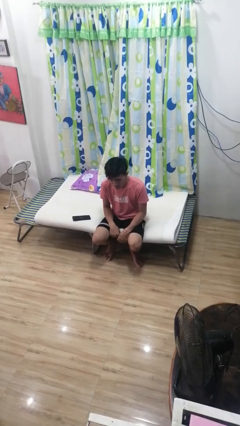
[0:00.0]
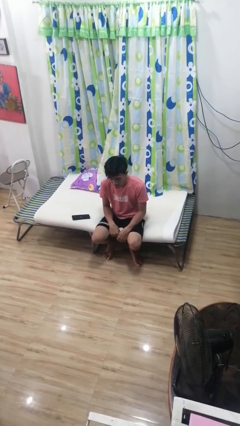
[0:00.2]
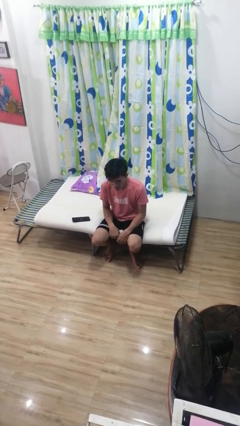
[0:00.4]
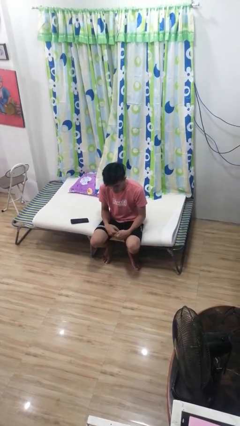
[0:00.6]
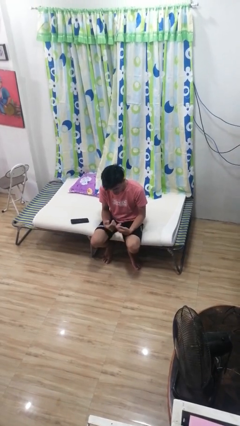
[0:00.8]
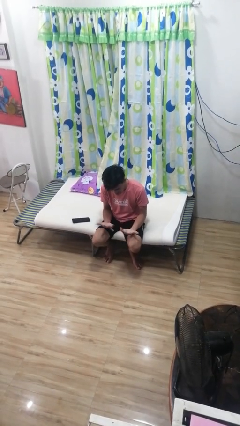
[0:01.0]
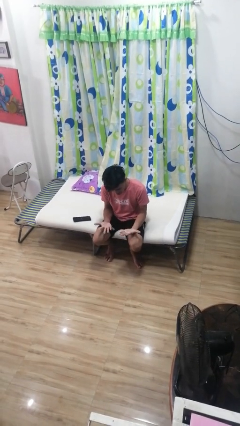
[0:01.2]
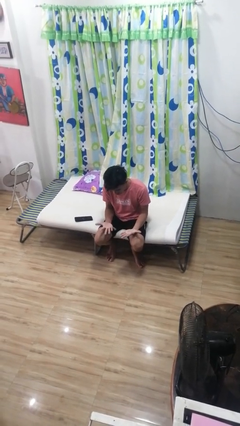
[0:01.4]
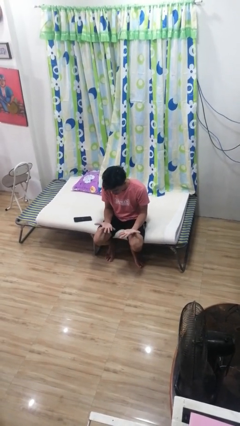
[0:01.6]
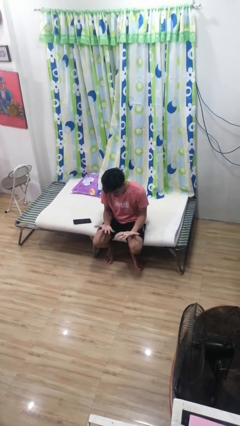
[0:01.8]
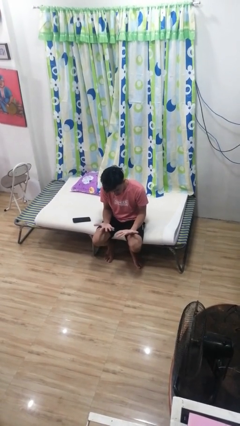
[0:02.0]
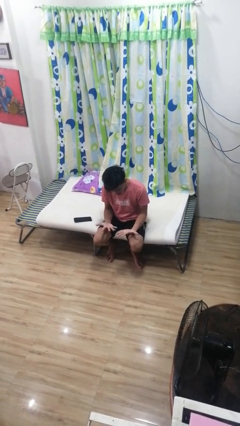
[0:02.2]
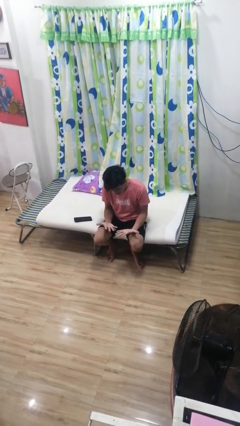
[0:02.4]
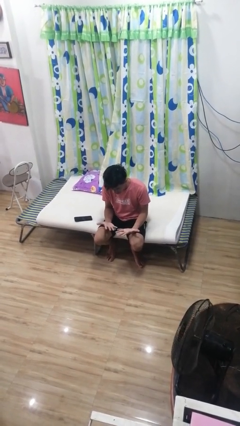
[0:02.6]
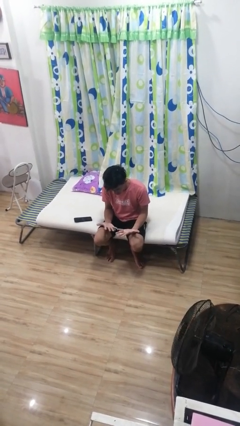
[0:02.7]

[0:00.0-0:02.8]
person looks at hands in lap

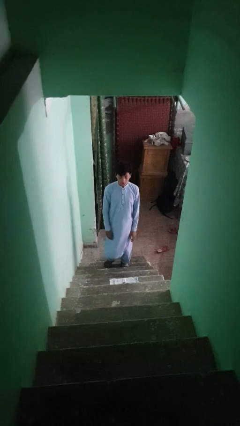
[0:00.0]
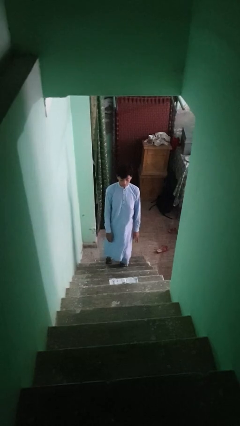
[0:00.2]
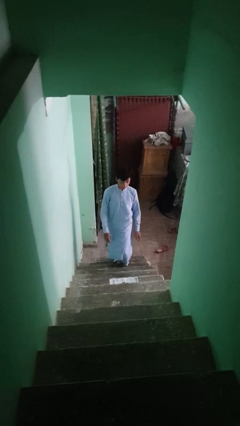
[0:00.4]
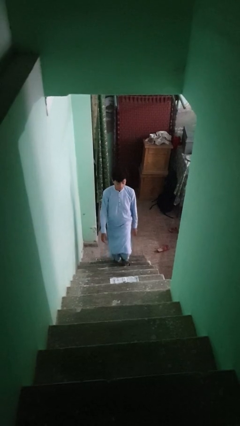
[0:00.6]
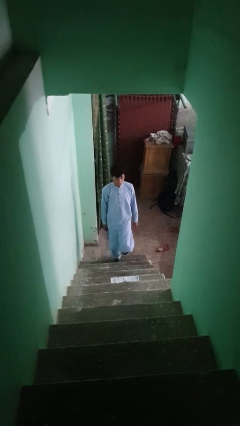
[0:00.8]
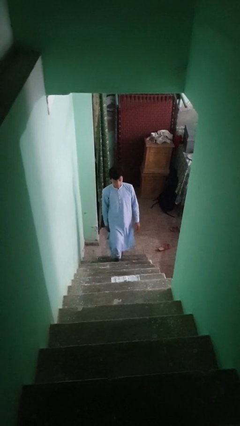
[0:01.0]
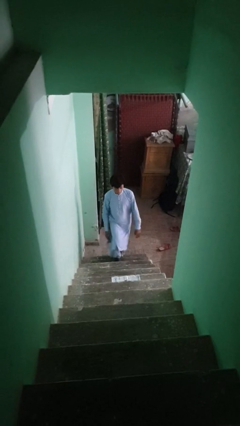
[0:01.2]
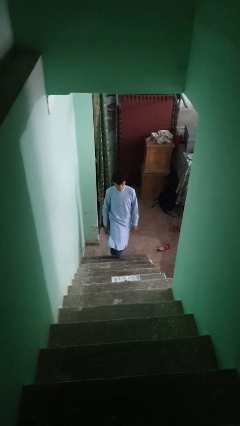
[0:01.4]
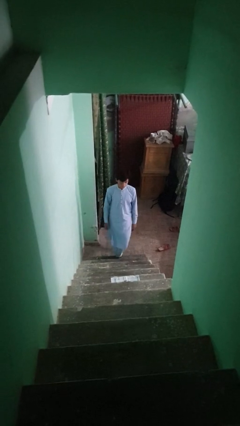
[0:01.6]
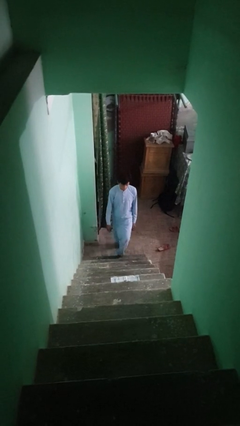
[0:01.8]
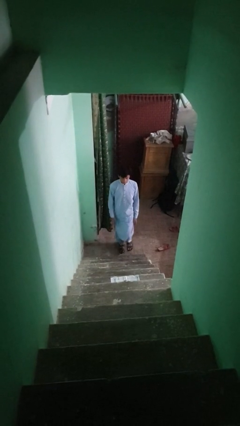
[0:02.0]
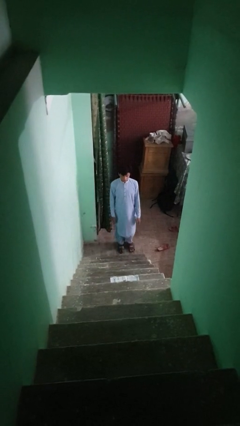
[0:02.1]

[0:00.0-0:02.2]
person climbs down stairs

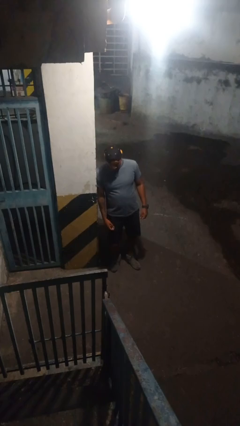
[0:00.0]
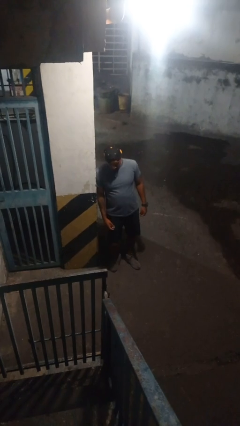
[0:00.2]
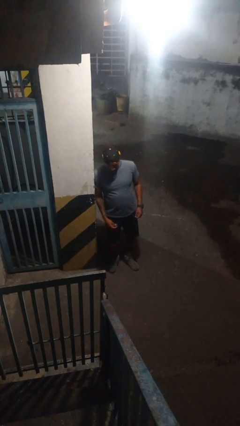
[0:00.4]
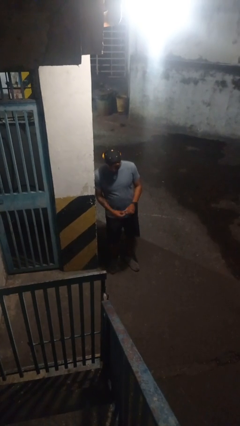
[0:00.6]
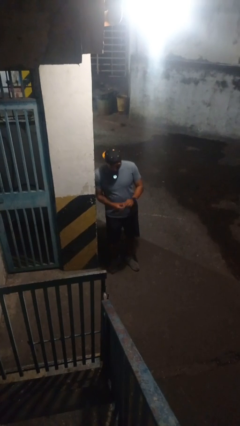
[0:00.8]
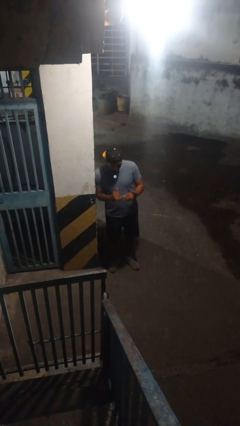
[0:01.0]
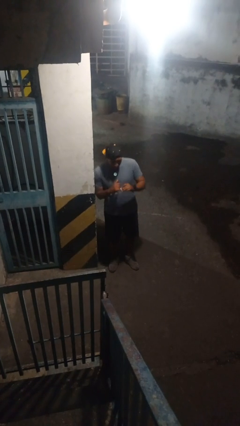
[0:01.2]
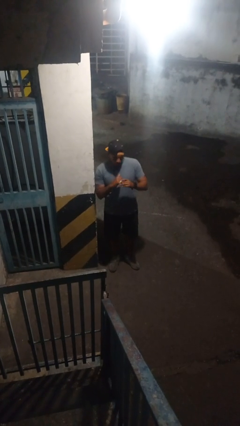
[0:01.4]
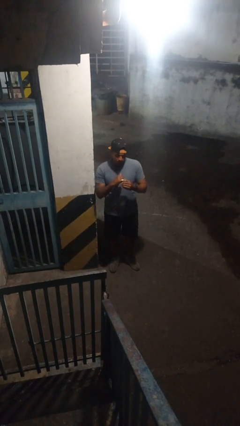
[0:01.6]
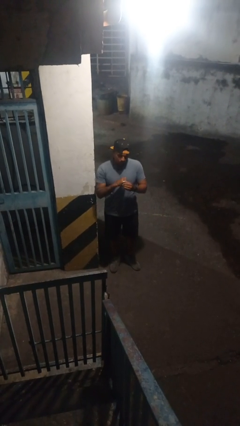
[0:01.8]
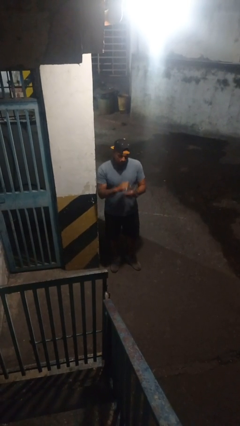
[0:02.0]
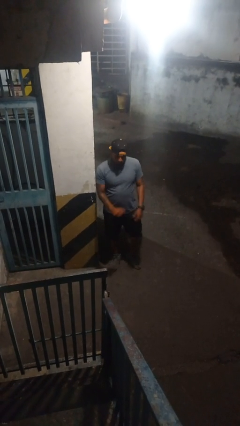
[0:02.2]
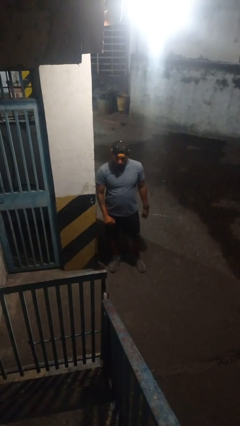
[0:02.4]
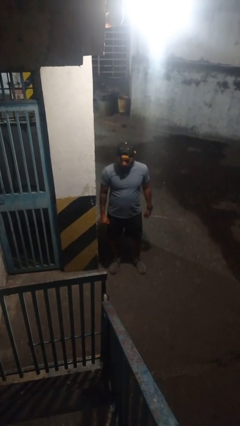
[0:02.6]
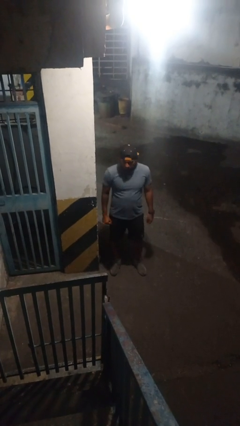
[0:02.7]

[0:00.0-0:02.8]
person puts on ring

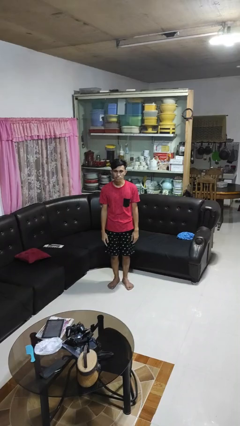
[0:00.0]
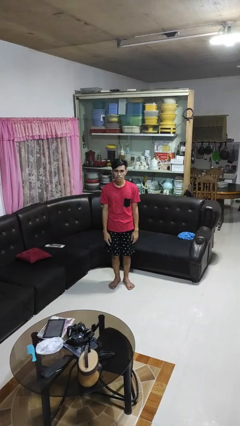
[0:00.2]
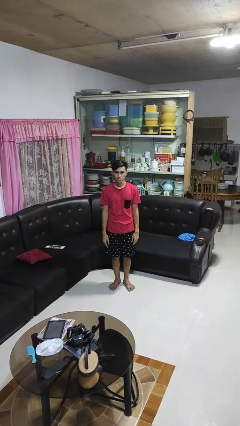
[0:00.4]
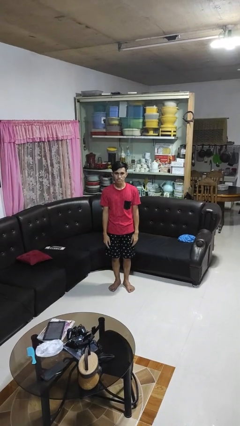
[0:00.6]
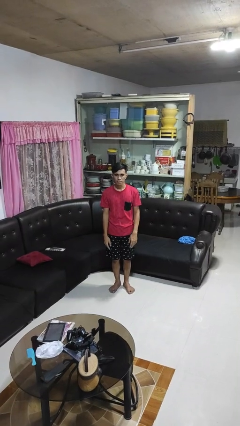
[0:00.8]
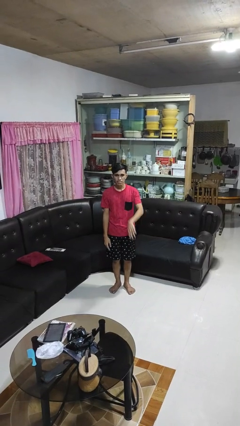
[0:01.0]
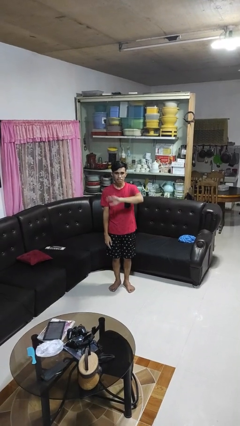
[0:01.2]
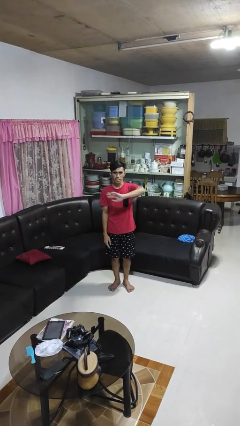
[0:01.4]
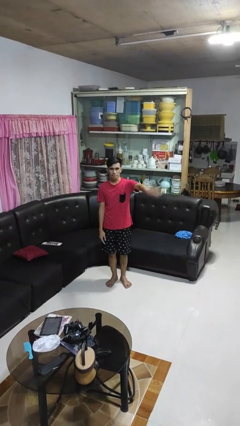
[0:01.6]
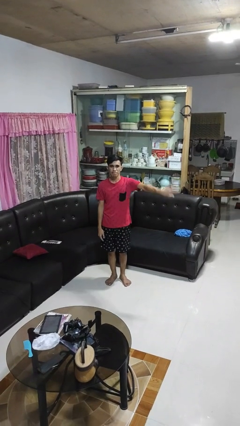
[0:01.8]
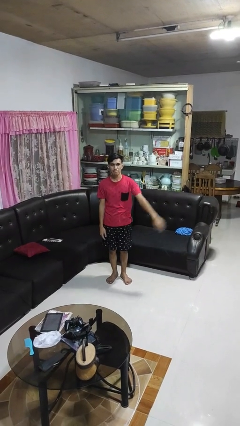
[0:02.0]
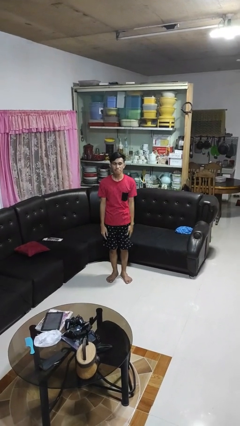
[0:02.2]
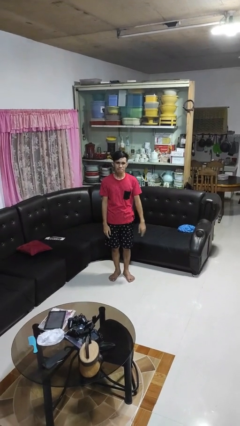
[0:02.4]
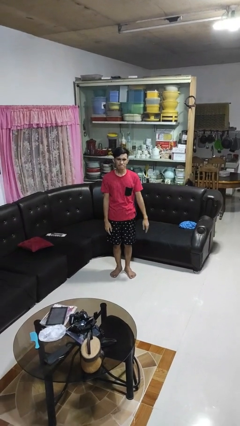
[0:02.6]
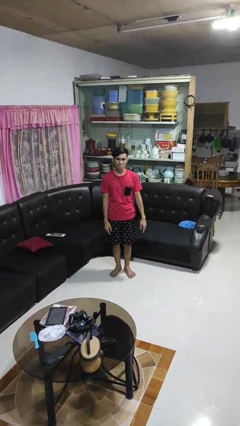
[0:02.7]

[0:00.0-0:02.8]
person gestures swipe left

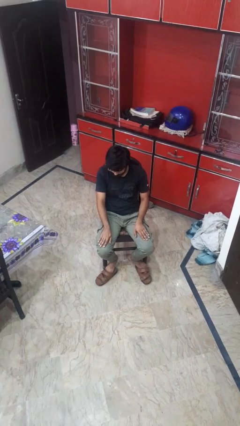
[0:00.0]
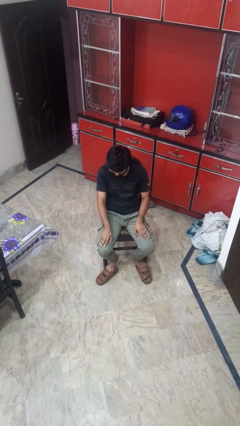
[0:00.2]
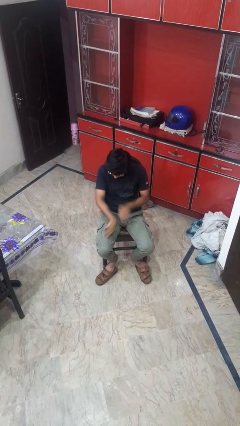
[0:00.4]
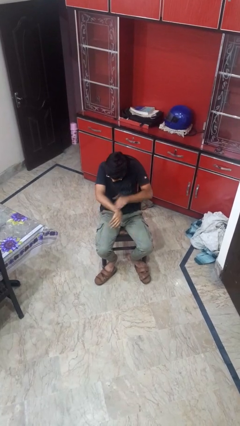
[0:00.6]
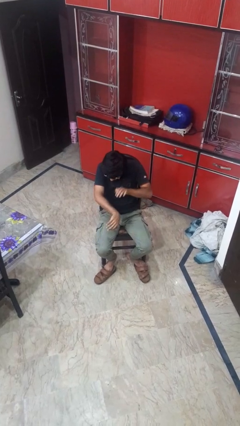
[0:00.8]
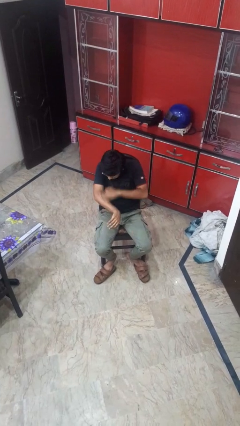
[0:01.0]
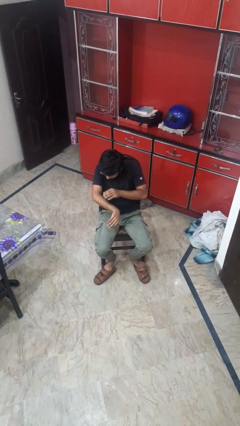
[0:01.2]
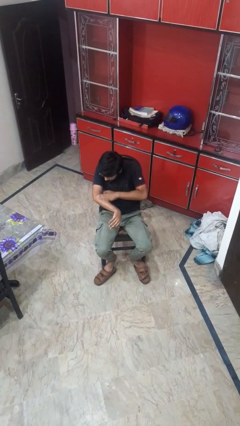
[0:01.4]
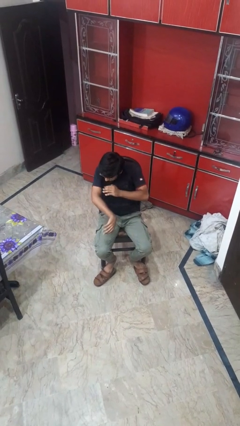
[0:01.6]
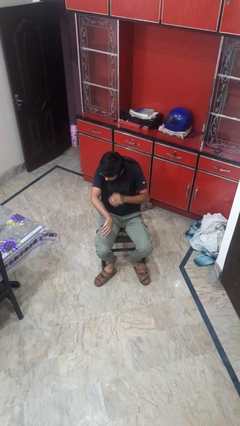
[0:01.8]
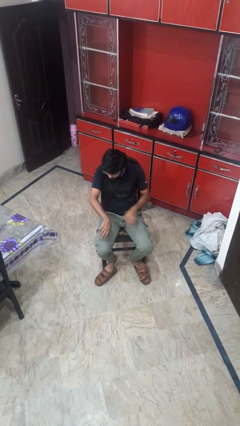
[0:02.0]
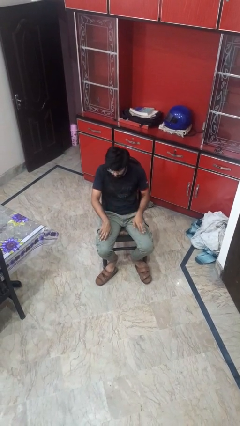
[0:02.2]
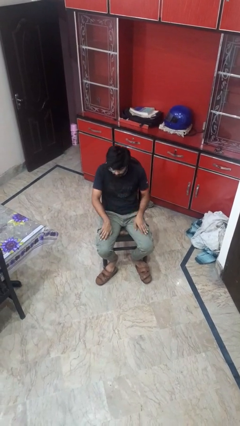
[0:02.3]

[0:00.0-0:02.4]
person swats bug

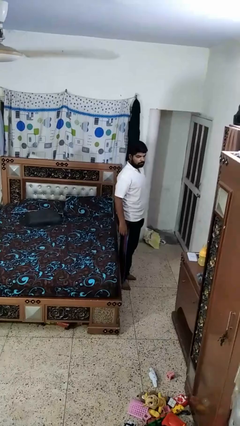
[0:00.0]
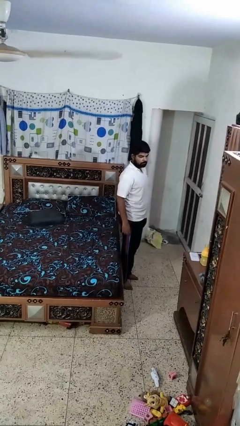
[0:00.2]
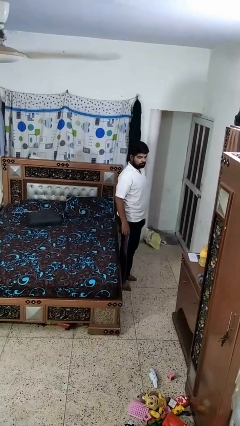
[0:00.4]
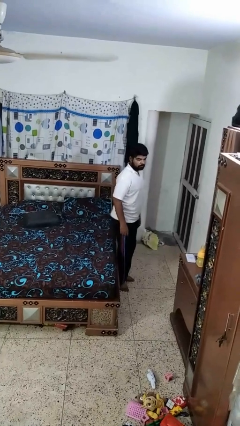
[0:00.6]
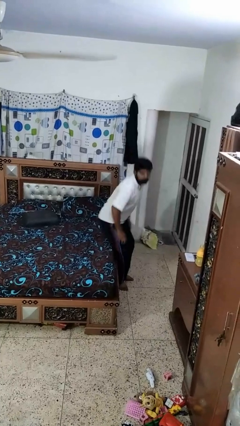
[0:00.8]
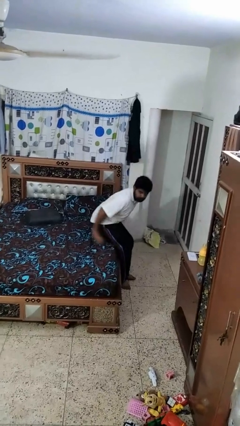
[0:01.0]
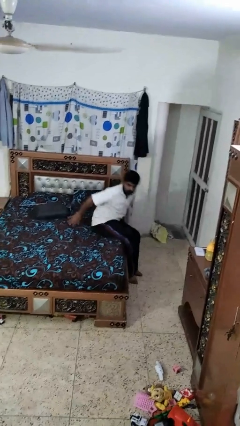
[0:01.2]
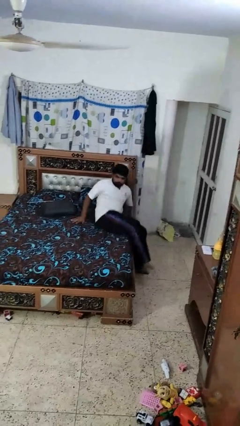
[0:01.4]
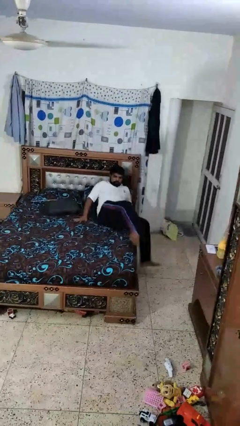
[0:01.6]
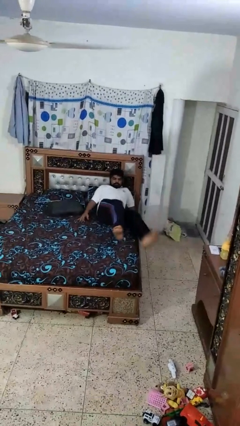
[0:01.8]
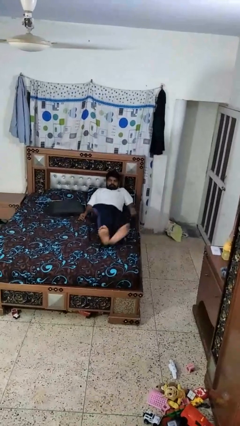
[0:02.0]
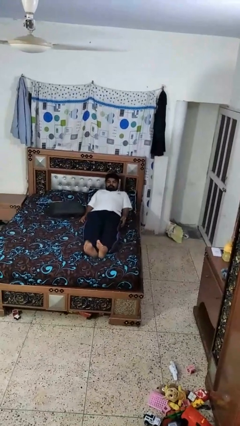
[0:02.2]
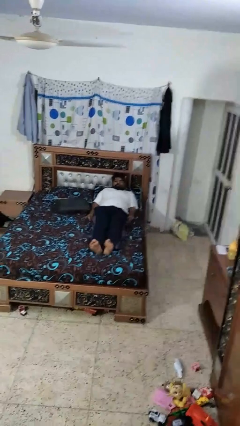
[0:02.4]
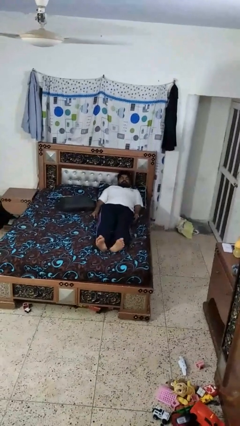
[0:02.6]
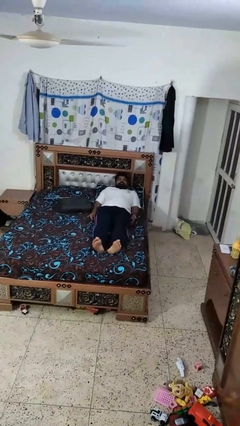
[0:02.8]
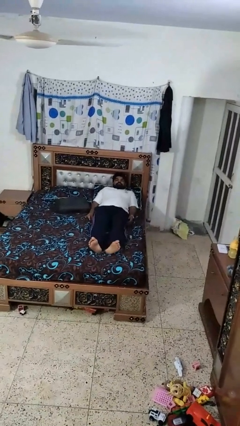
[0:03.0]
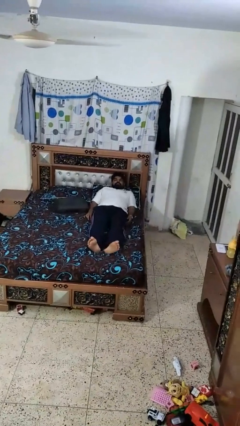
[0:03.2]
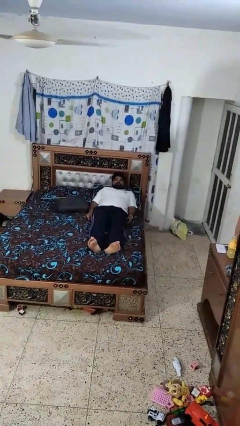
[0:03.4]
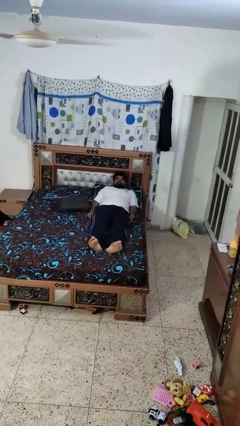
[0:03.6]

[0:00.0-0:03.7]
person lies down on bed

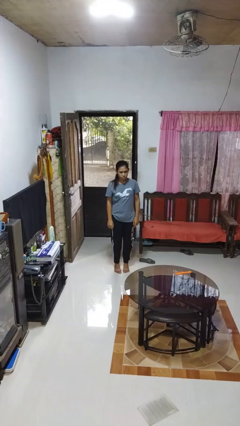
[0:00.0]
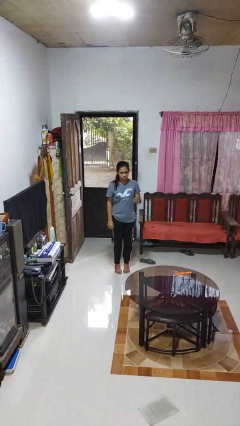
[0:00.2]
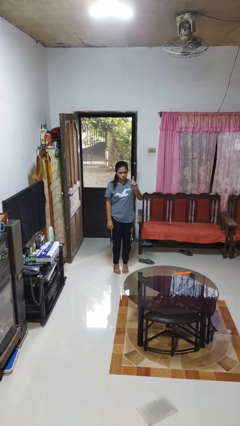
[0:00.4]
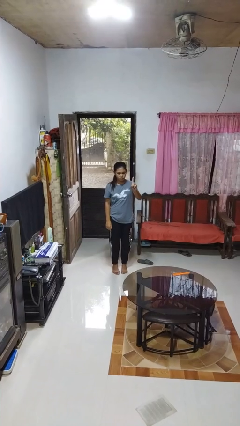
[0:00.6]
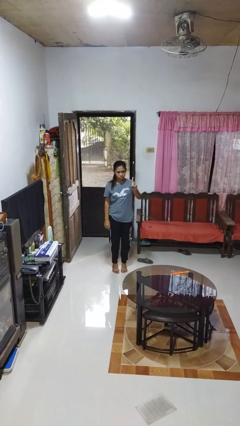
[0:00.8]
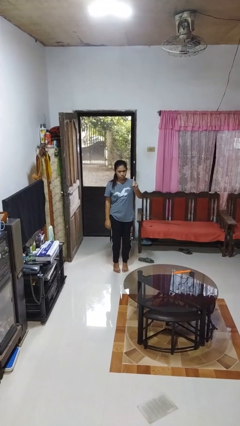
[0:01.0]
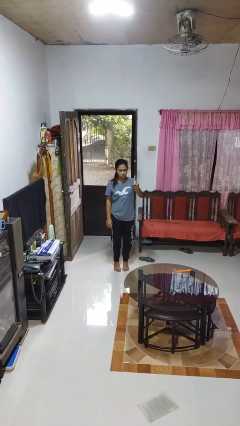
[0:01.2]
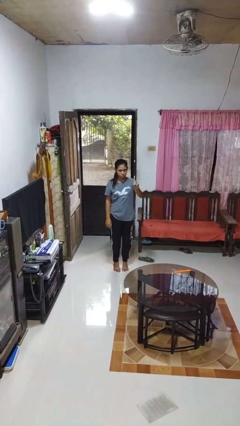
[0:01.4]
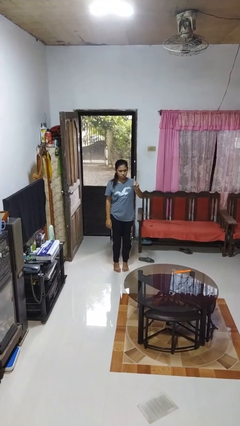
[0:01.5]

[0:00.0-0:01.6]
person gestures number one
